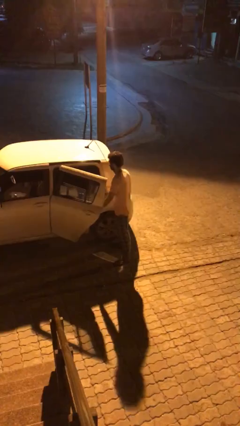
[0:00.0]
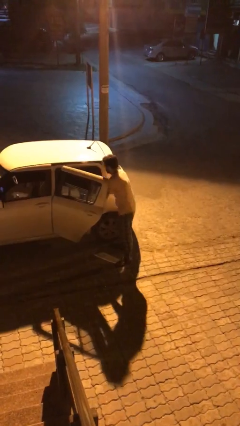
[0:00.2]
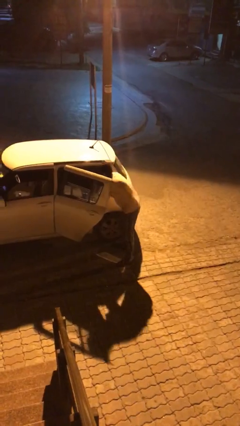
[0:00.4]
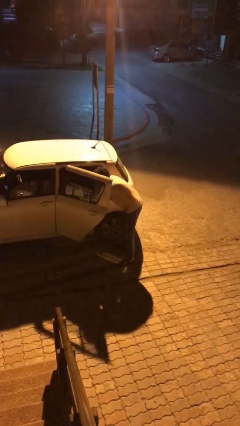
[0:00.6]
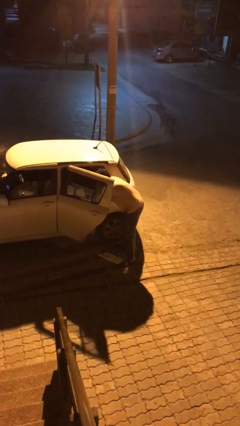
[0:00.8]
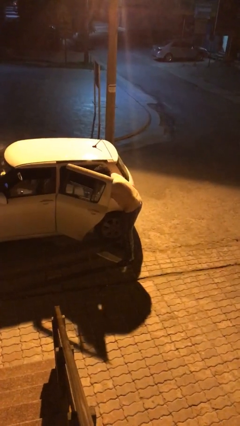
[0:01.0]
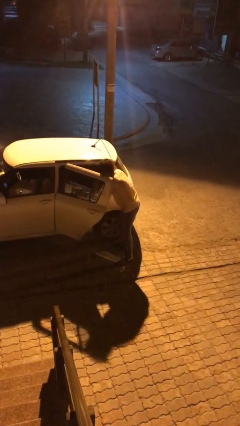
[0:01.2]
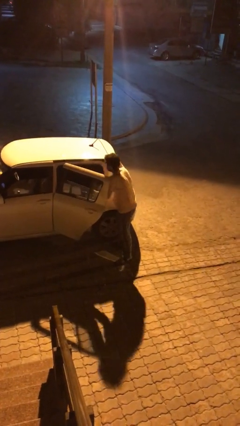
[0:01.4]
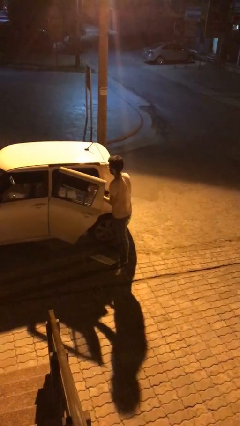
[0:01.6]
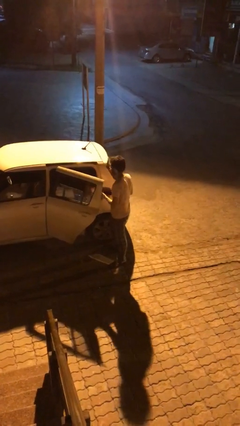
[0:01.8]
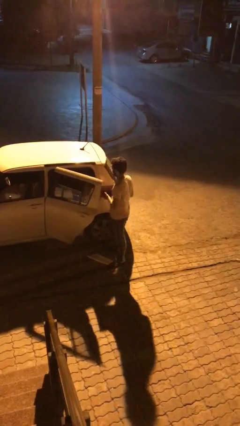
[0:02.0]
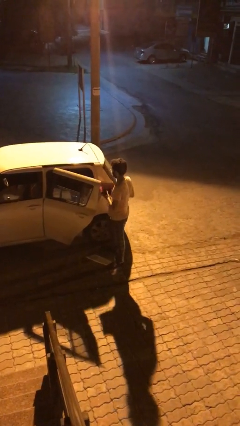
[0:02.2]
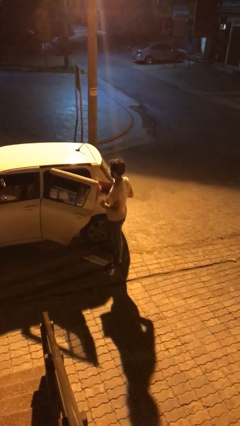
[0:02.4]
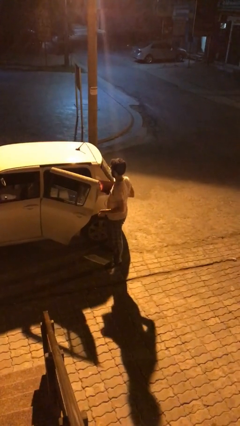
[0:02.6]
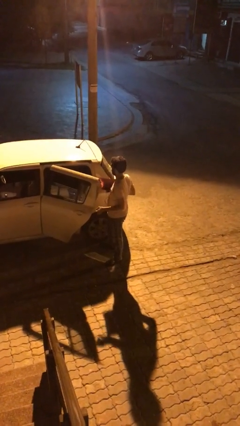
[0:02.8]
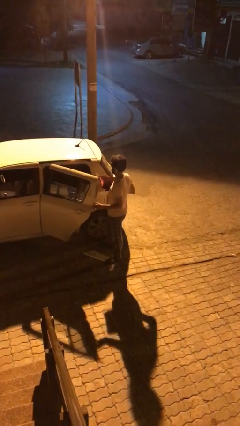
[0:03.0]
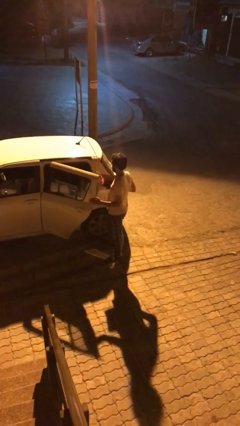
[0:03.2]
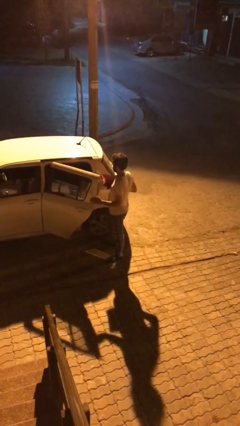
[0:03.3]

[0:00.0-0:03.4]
person unloads car

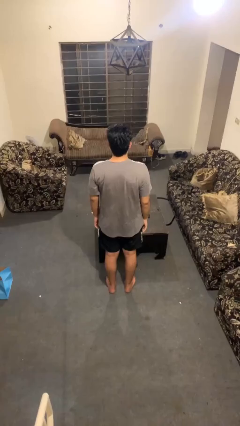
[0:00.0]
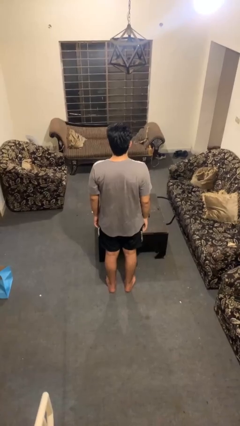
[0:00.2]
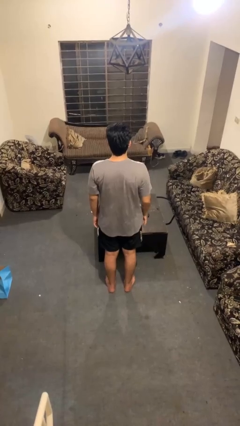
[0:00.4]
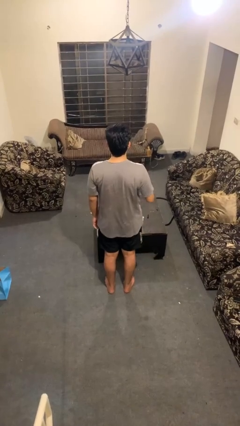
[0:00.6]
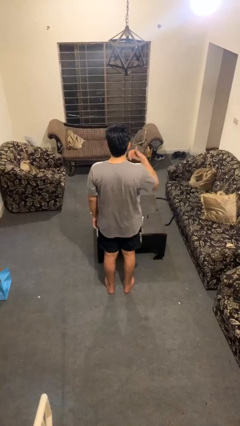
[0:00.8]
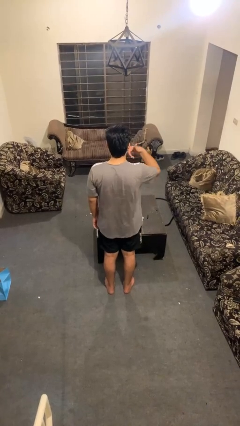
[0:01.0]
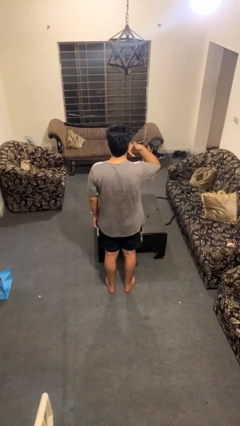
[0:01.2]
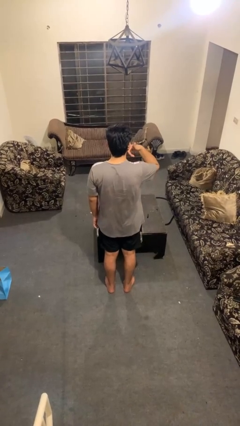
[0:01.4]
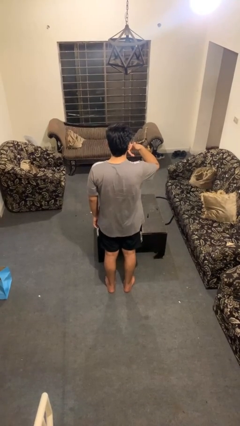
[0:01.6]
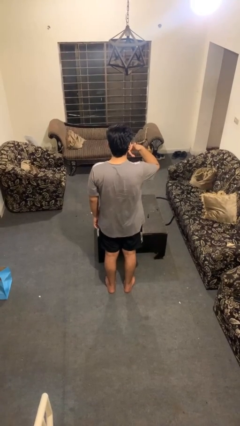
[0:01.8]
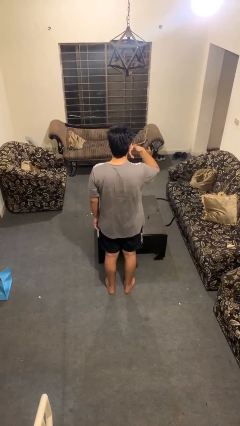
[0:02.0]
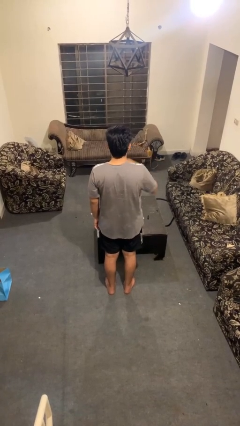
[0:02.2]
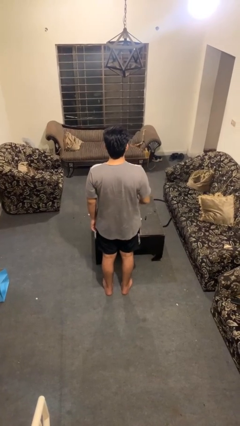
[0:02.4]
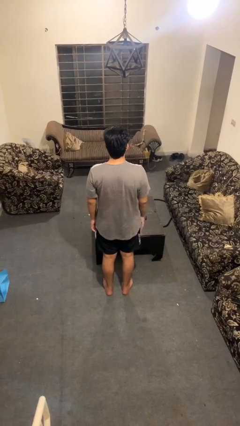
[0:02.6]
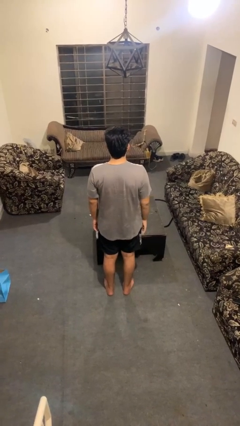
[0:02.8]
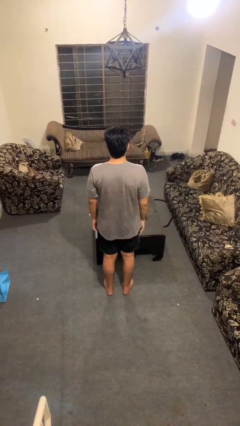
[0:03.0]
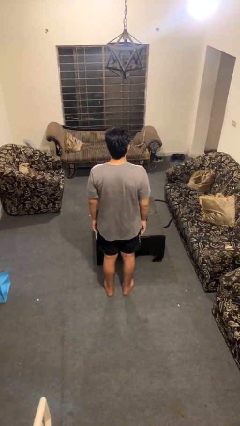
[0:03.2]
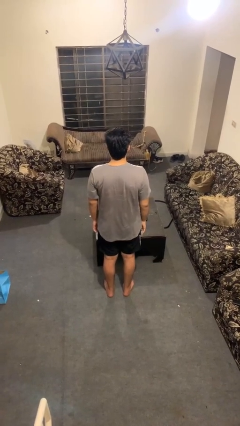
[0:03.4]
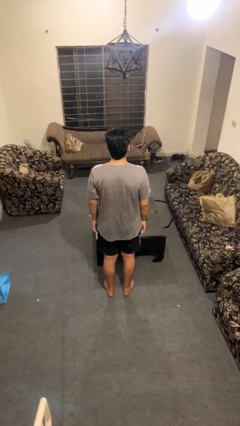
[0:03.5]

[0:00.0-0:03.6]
person gestures call me

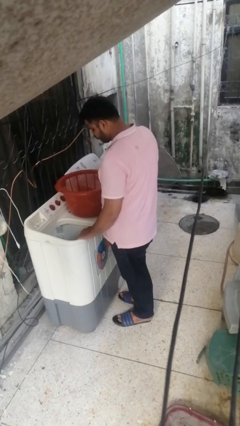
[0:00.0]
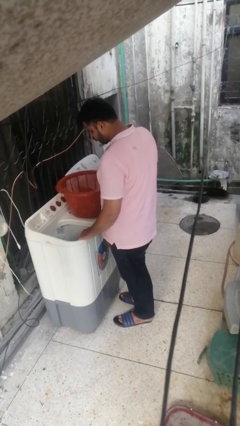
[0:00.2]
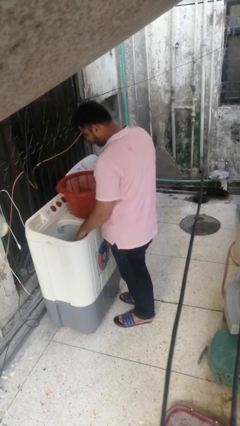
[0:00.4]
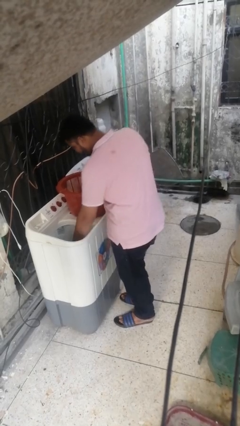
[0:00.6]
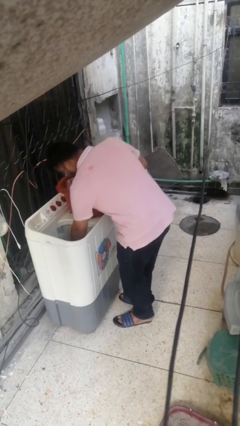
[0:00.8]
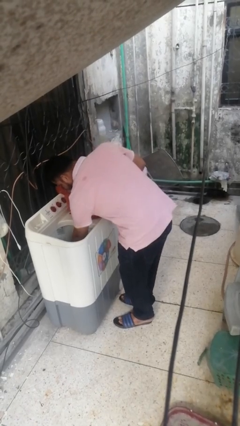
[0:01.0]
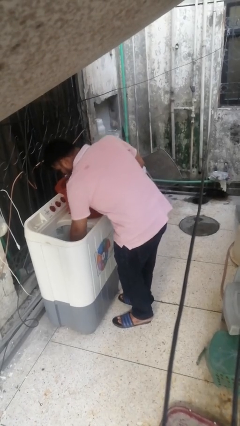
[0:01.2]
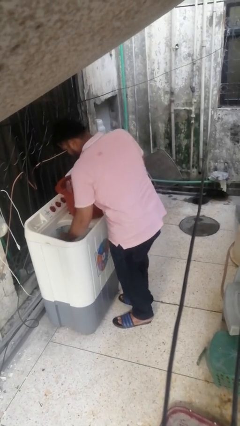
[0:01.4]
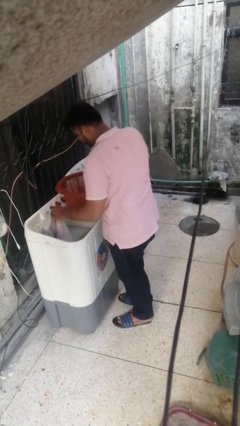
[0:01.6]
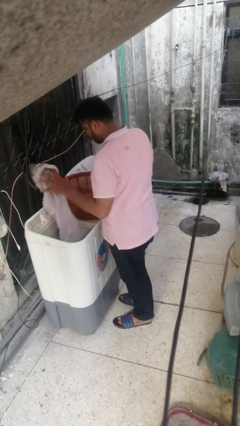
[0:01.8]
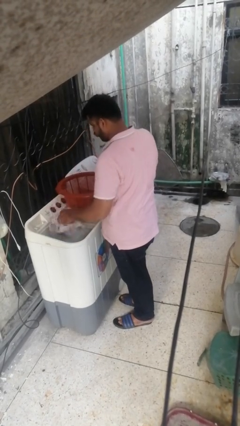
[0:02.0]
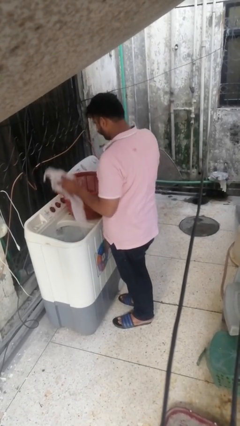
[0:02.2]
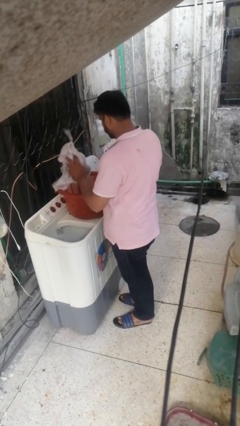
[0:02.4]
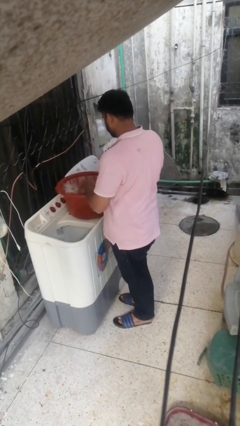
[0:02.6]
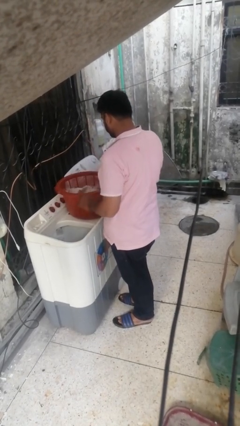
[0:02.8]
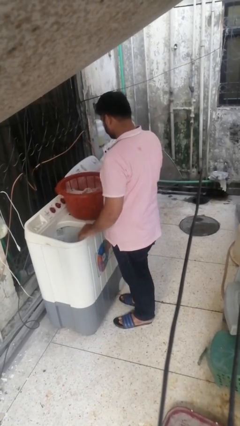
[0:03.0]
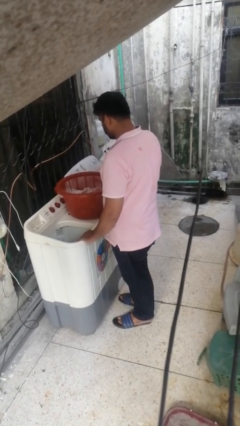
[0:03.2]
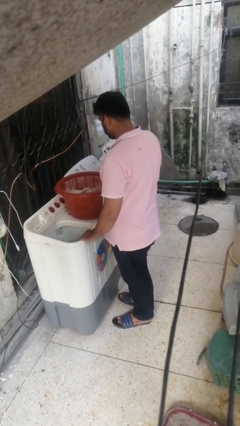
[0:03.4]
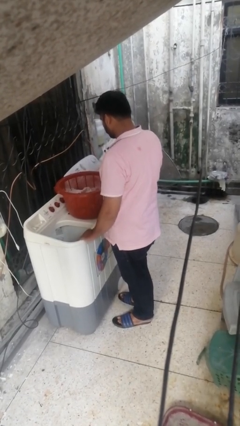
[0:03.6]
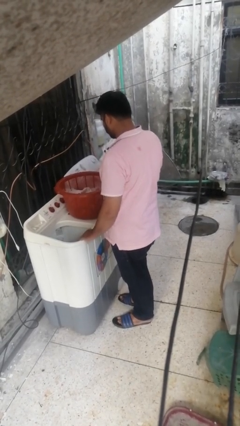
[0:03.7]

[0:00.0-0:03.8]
person unloads clotheswasher

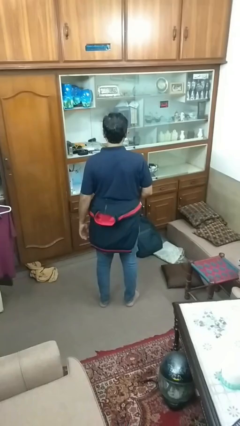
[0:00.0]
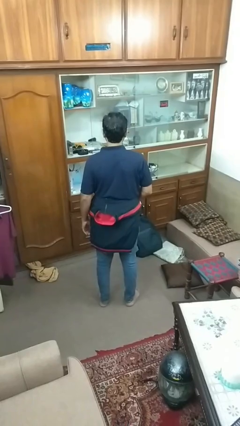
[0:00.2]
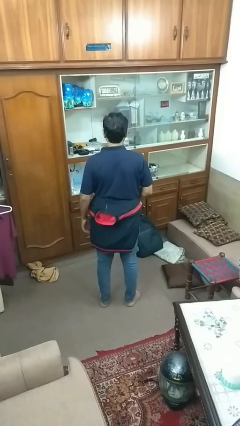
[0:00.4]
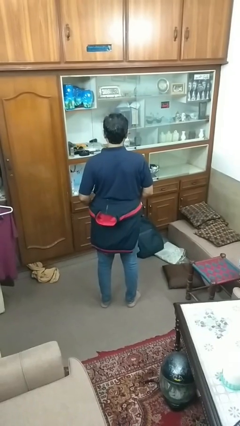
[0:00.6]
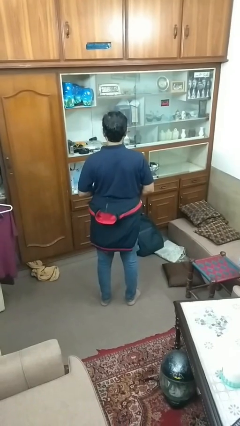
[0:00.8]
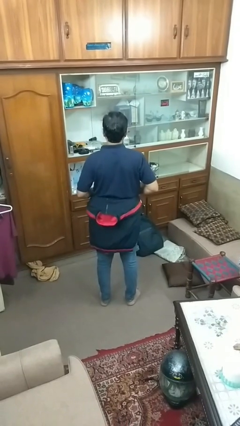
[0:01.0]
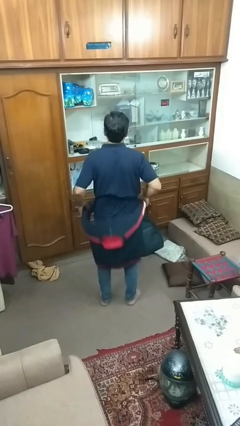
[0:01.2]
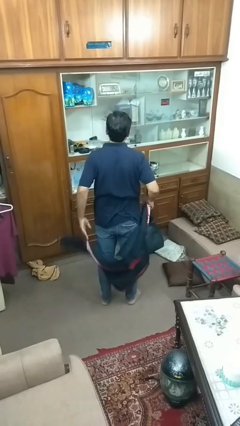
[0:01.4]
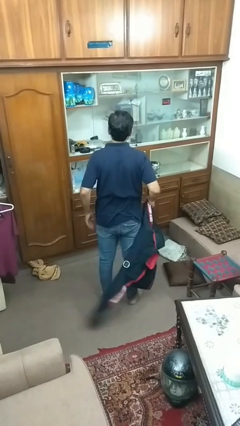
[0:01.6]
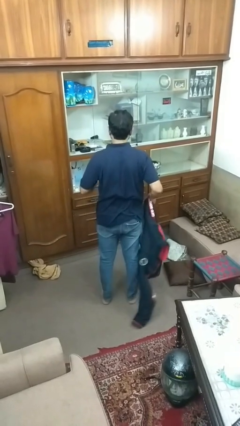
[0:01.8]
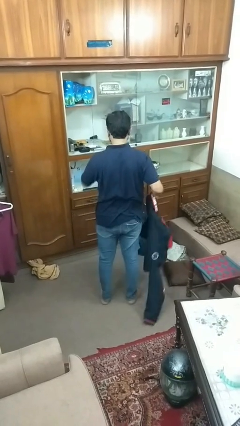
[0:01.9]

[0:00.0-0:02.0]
person unties jacket around waist

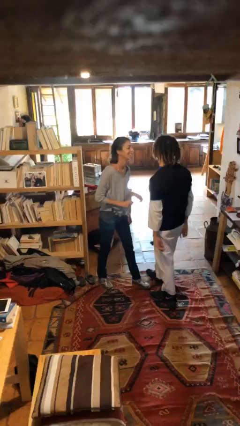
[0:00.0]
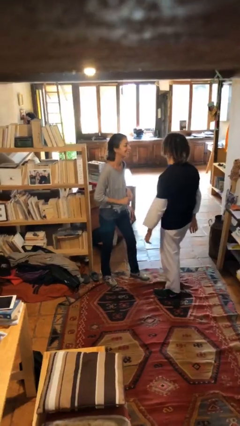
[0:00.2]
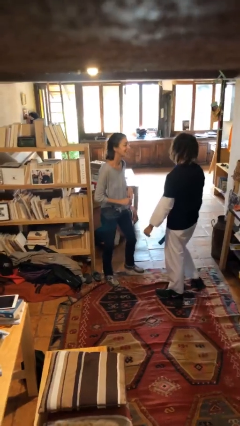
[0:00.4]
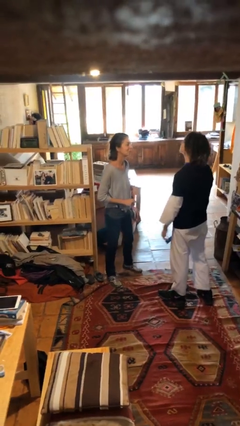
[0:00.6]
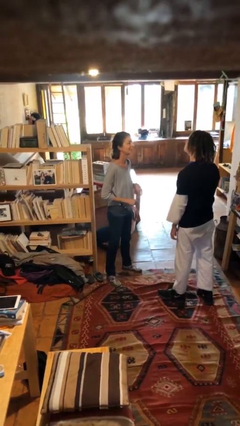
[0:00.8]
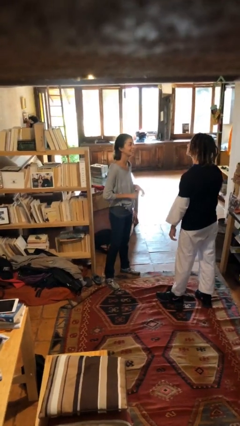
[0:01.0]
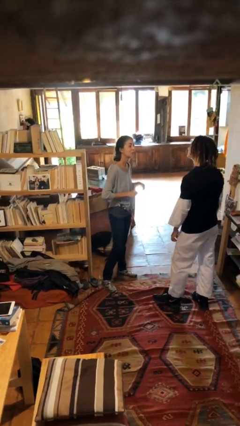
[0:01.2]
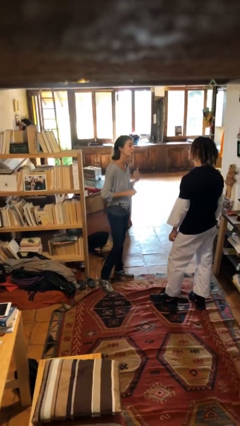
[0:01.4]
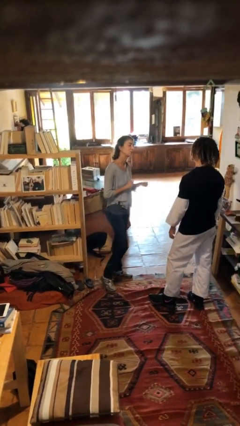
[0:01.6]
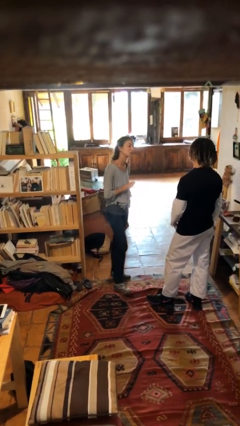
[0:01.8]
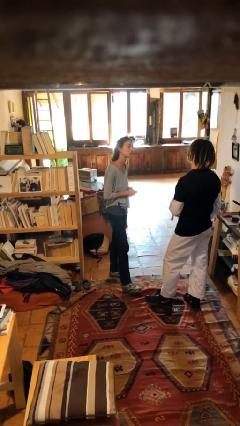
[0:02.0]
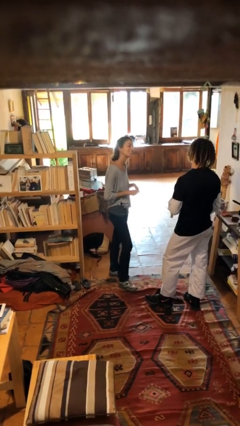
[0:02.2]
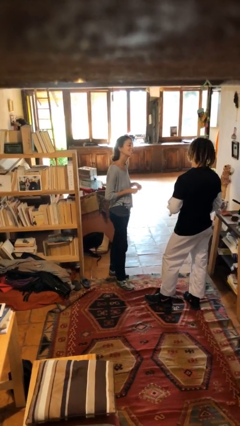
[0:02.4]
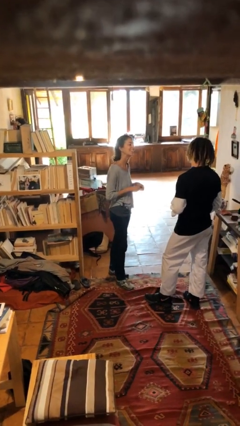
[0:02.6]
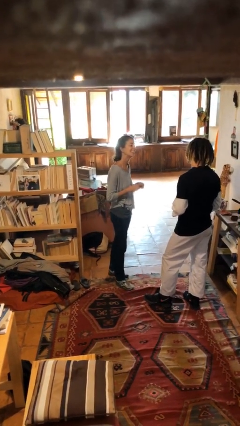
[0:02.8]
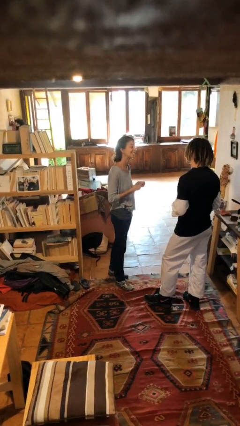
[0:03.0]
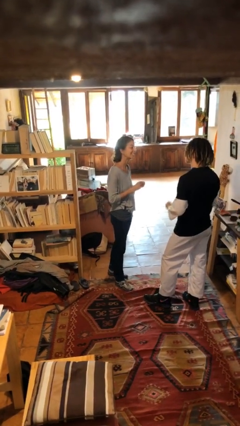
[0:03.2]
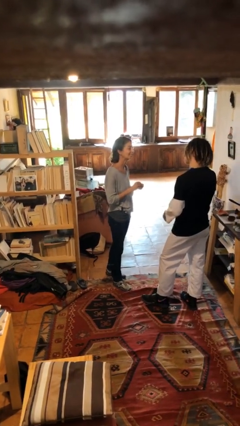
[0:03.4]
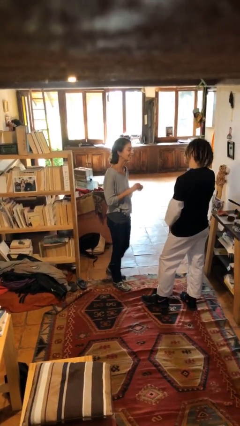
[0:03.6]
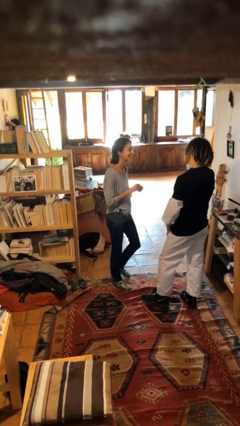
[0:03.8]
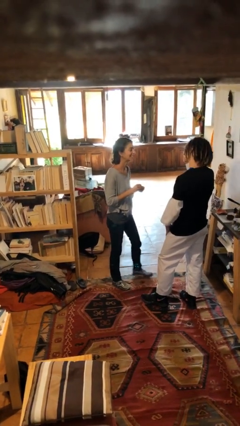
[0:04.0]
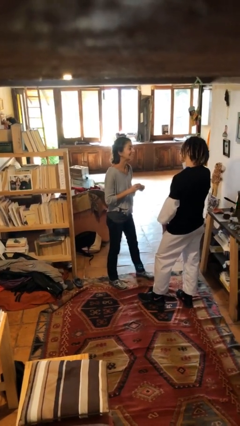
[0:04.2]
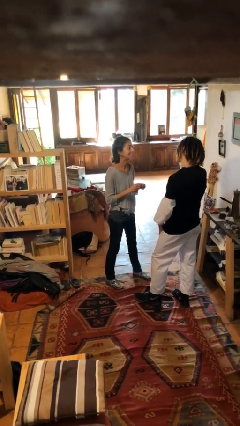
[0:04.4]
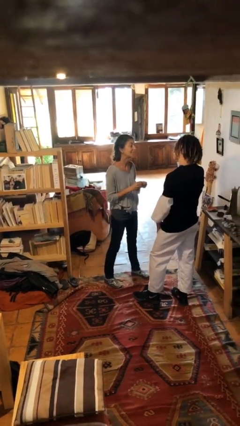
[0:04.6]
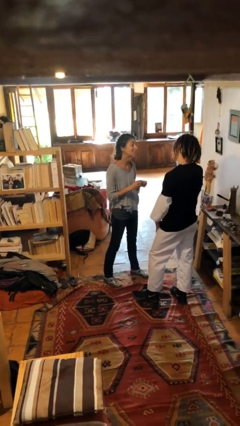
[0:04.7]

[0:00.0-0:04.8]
person talks to person
